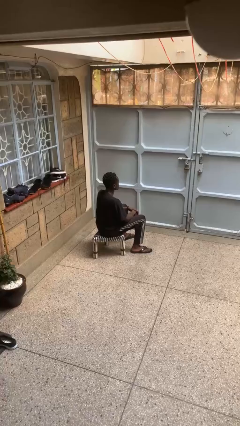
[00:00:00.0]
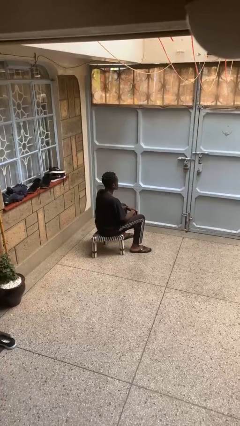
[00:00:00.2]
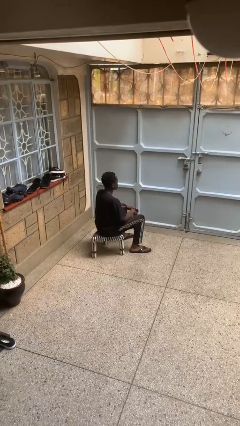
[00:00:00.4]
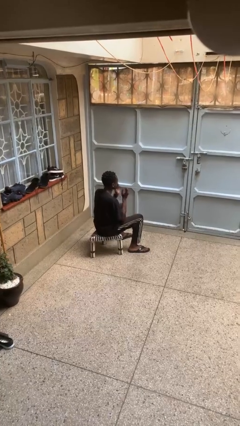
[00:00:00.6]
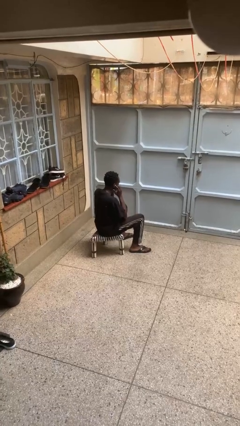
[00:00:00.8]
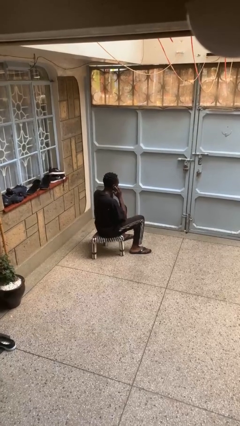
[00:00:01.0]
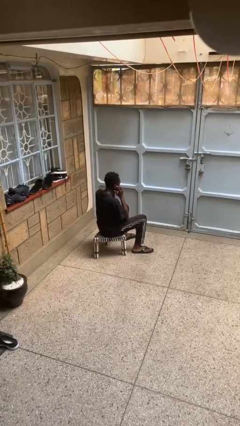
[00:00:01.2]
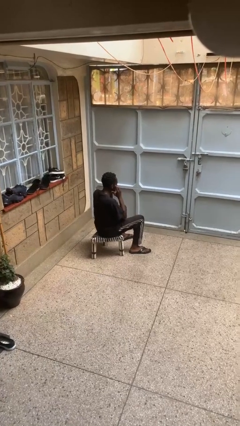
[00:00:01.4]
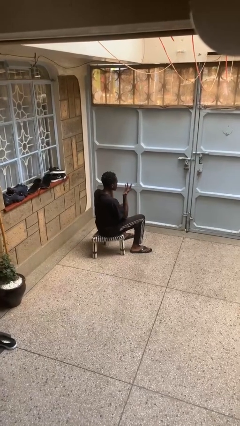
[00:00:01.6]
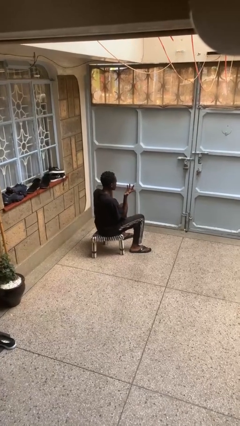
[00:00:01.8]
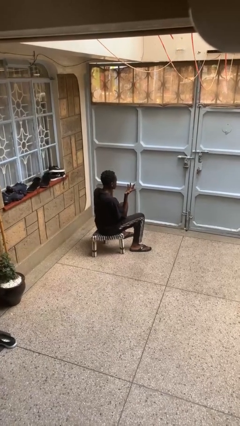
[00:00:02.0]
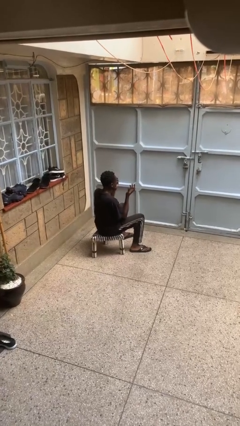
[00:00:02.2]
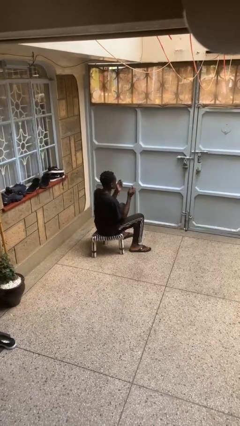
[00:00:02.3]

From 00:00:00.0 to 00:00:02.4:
person puts fingers in ear

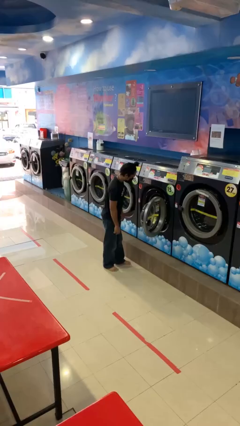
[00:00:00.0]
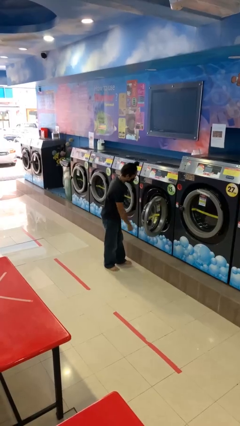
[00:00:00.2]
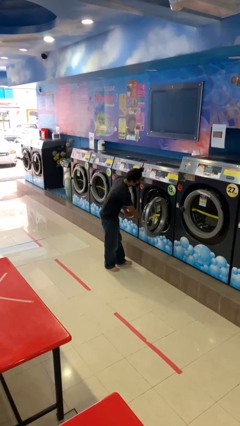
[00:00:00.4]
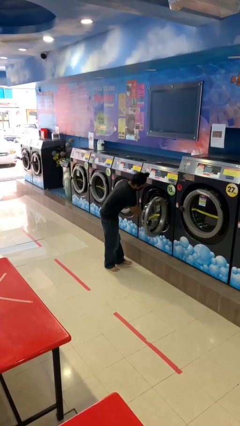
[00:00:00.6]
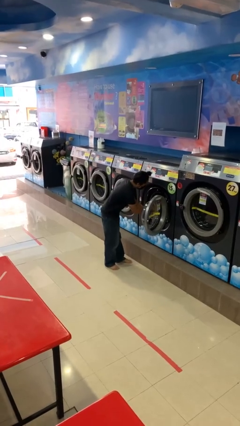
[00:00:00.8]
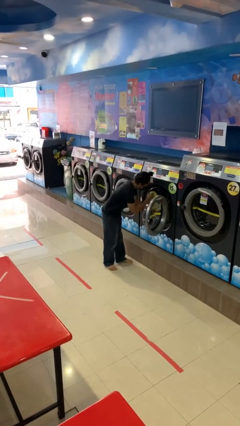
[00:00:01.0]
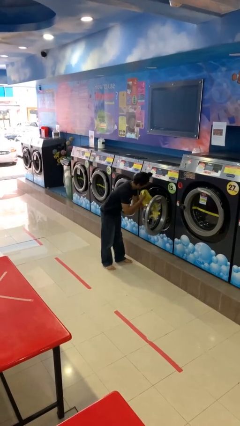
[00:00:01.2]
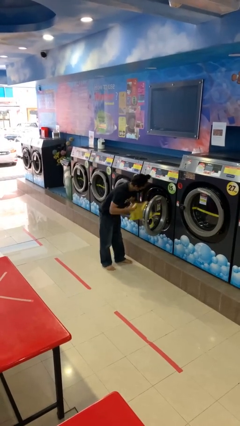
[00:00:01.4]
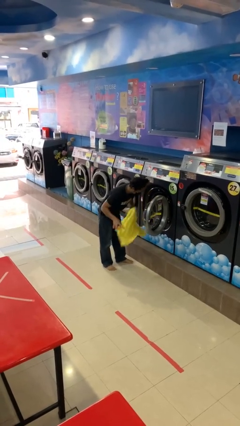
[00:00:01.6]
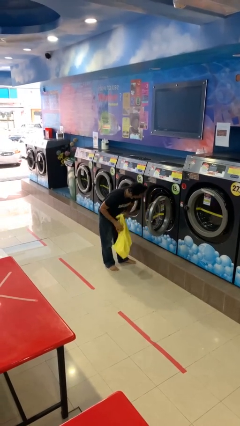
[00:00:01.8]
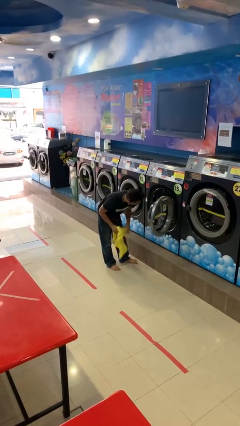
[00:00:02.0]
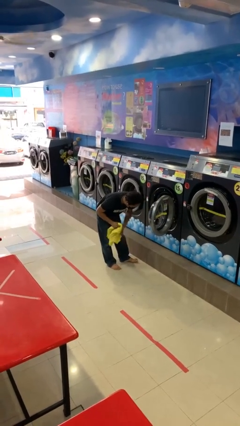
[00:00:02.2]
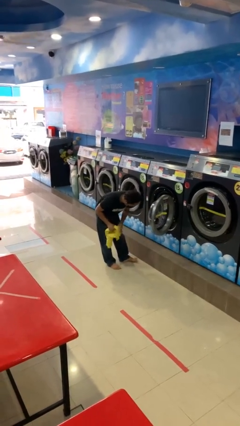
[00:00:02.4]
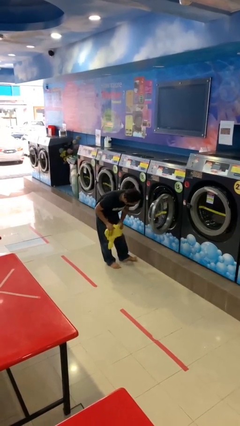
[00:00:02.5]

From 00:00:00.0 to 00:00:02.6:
person unloads clotheswasher

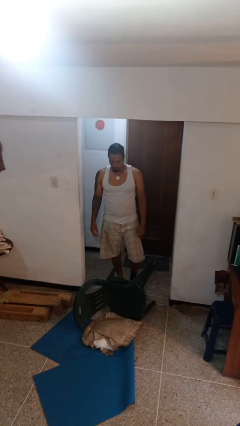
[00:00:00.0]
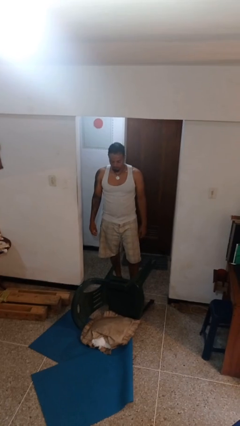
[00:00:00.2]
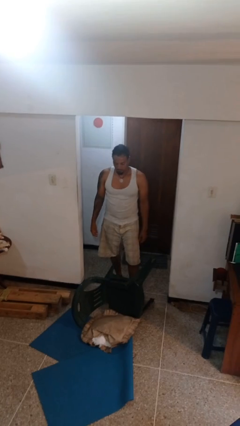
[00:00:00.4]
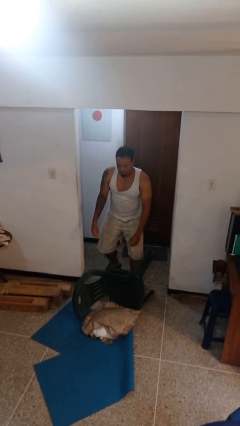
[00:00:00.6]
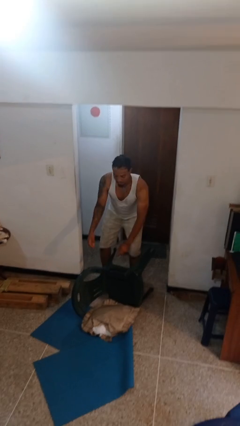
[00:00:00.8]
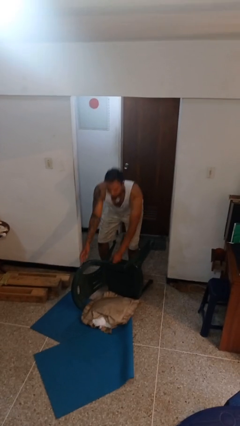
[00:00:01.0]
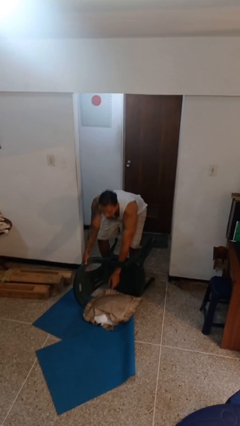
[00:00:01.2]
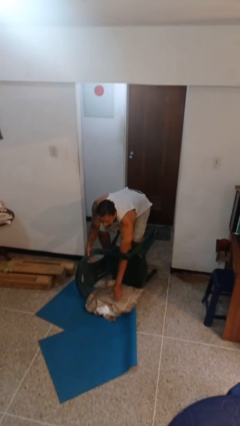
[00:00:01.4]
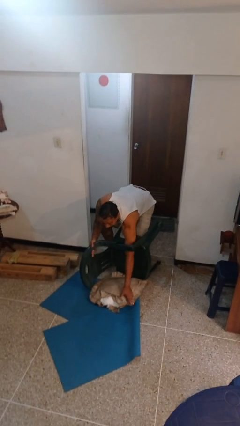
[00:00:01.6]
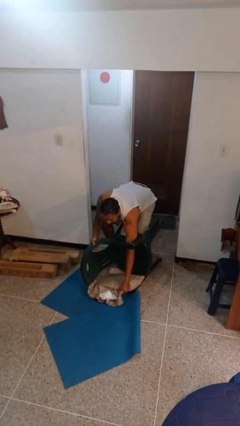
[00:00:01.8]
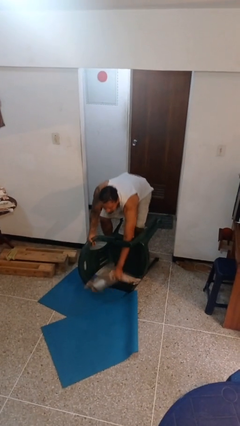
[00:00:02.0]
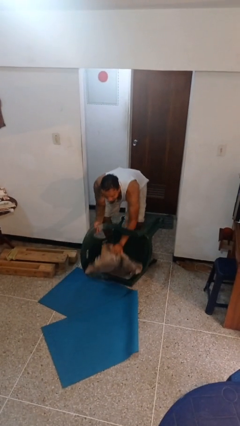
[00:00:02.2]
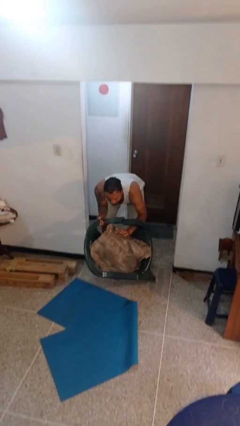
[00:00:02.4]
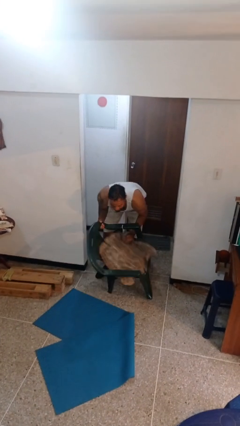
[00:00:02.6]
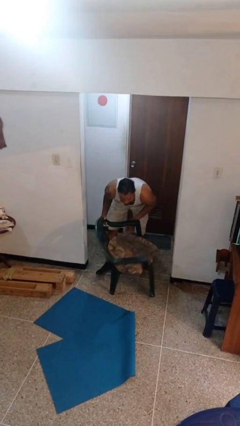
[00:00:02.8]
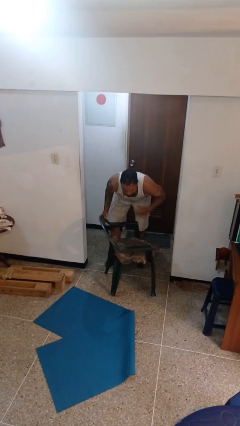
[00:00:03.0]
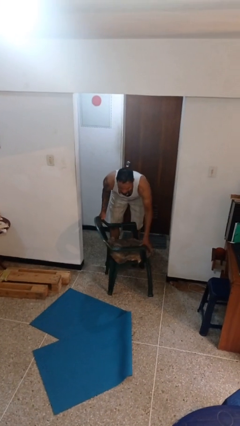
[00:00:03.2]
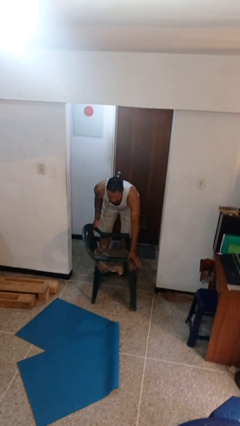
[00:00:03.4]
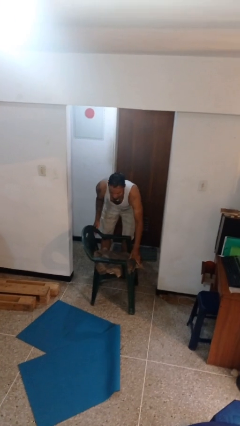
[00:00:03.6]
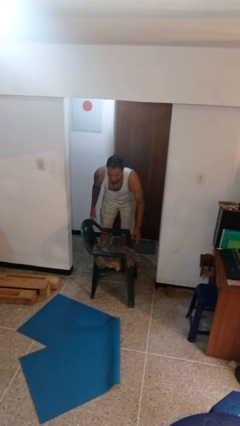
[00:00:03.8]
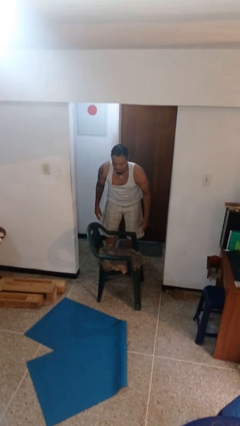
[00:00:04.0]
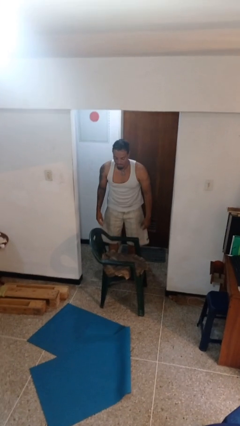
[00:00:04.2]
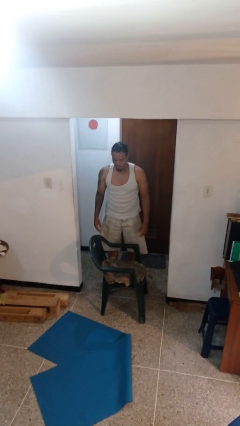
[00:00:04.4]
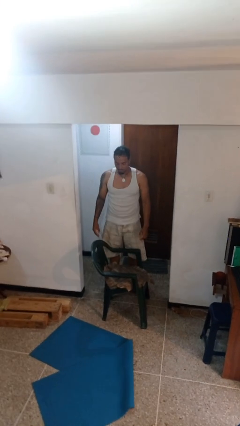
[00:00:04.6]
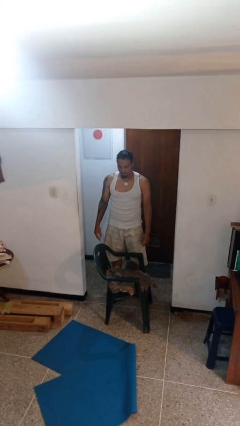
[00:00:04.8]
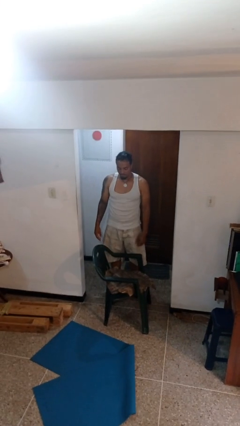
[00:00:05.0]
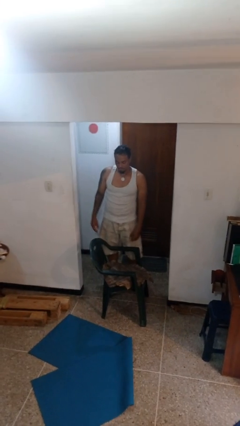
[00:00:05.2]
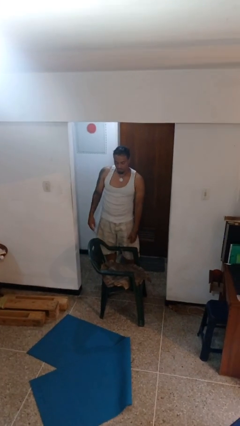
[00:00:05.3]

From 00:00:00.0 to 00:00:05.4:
person sets upright furniture

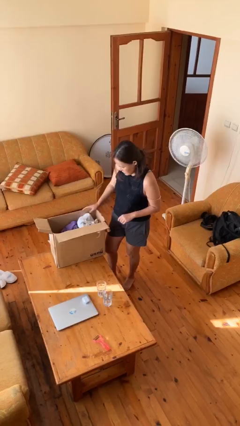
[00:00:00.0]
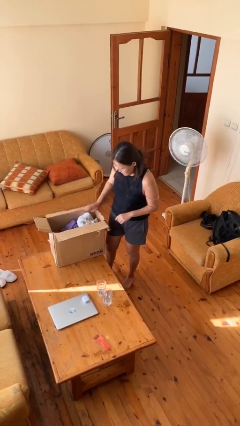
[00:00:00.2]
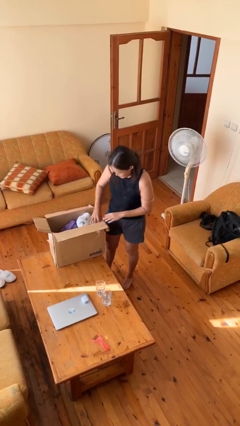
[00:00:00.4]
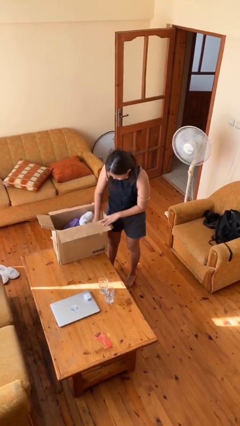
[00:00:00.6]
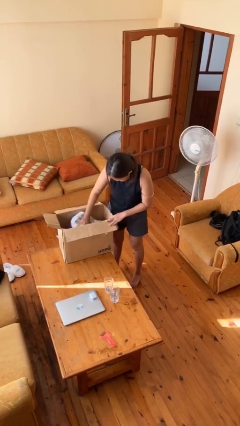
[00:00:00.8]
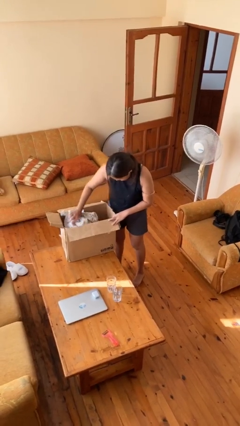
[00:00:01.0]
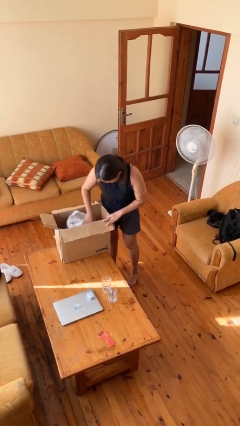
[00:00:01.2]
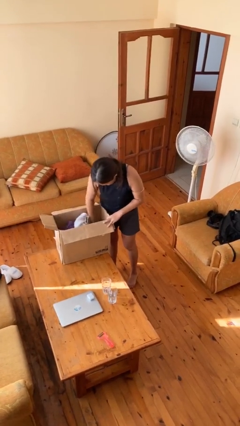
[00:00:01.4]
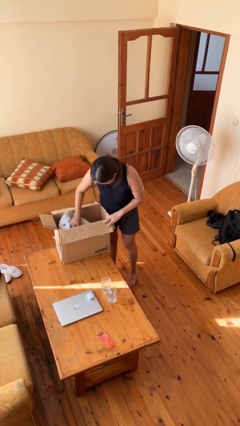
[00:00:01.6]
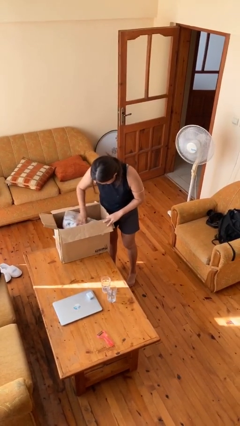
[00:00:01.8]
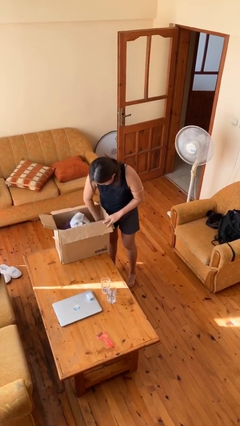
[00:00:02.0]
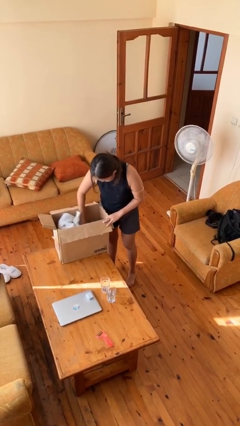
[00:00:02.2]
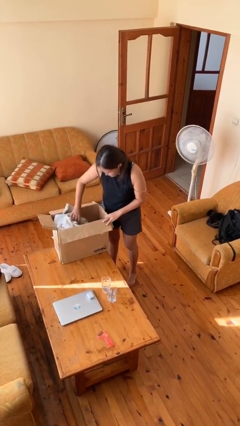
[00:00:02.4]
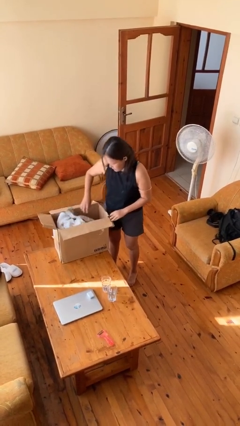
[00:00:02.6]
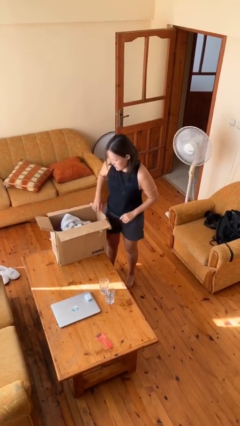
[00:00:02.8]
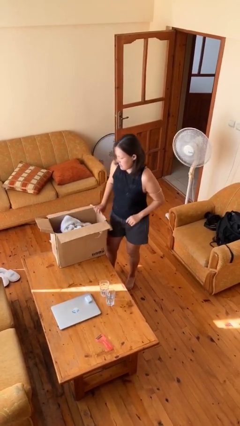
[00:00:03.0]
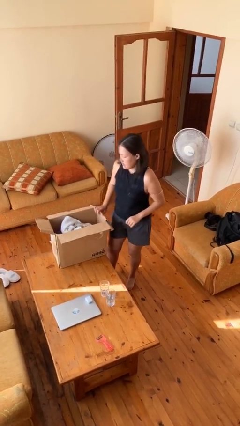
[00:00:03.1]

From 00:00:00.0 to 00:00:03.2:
person searches in box

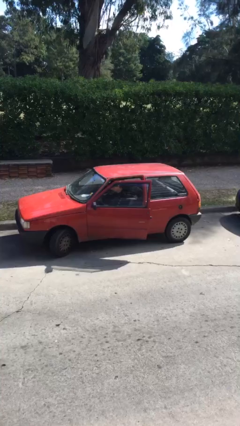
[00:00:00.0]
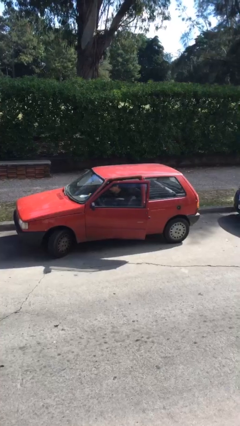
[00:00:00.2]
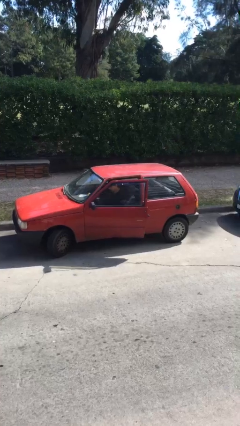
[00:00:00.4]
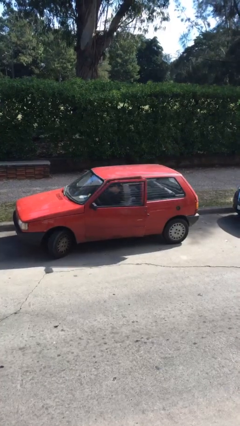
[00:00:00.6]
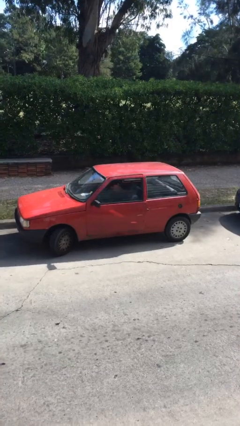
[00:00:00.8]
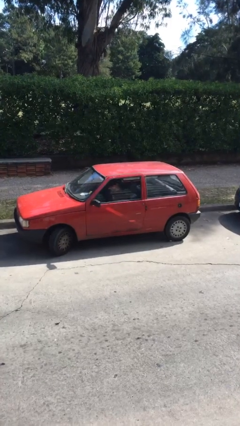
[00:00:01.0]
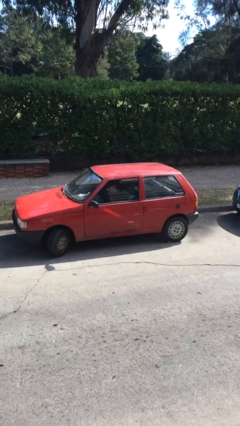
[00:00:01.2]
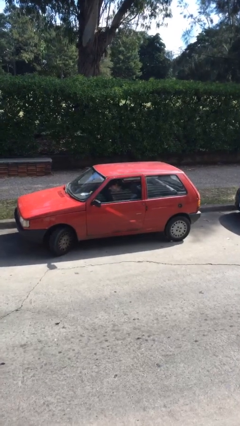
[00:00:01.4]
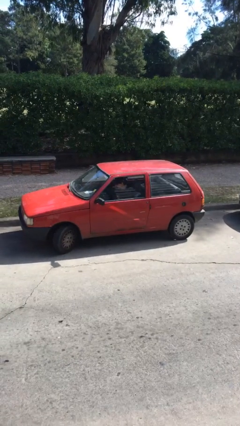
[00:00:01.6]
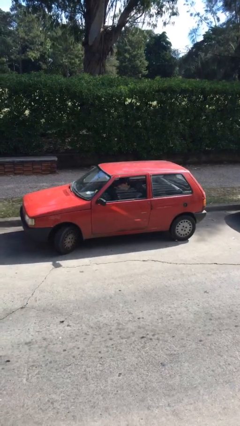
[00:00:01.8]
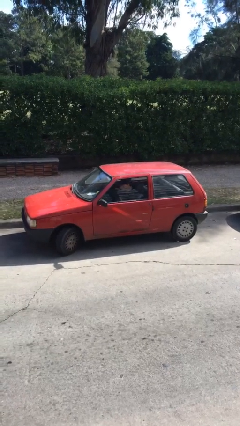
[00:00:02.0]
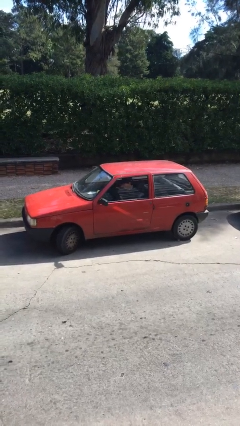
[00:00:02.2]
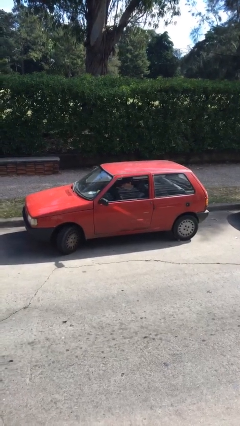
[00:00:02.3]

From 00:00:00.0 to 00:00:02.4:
person closes car door

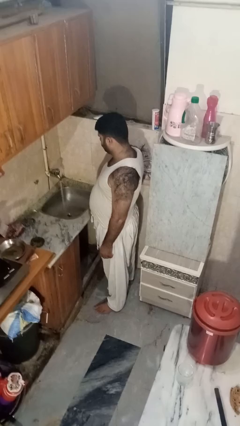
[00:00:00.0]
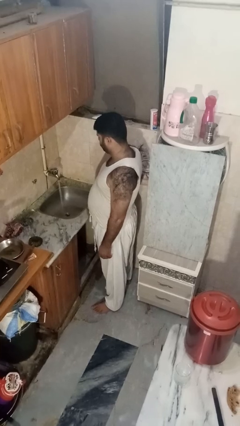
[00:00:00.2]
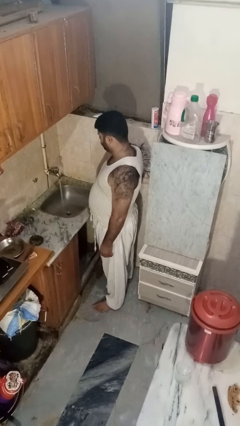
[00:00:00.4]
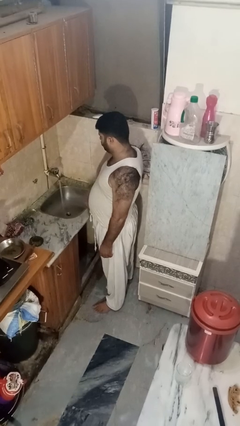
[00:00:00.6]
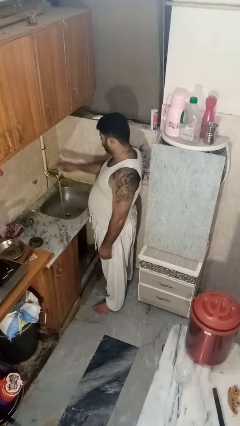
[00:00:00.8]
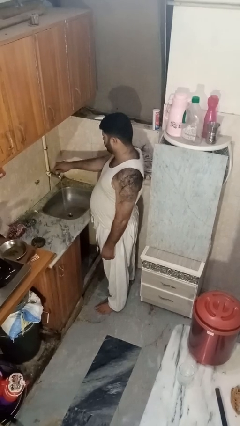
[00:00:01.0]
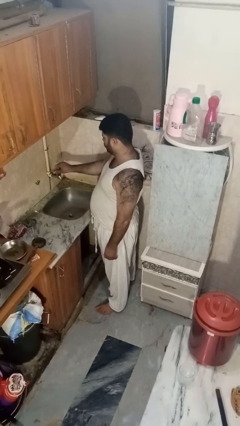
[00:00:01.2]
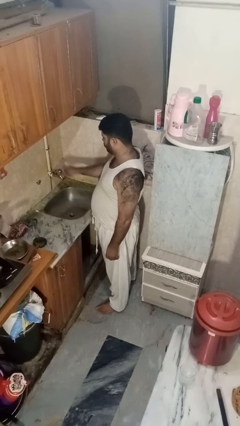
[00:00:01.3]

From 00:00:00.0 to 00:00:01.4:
person turns off faucet
